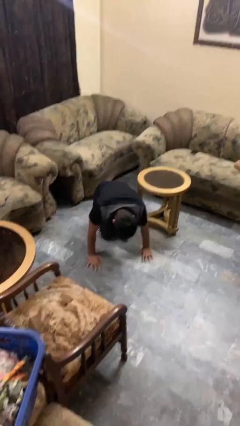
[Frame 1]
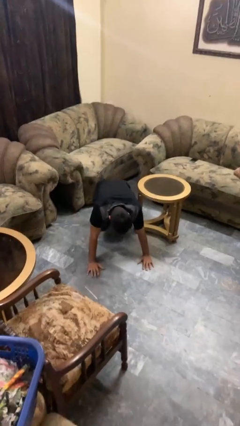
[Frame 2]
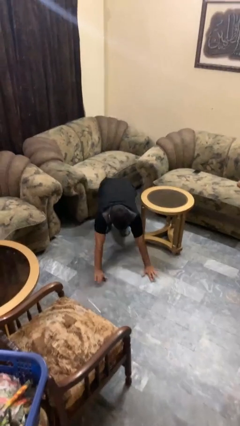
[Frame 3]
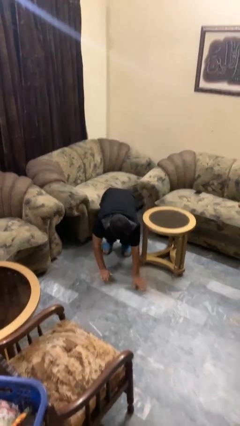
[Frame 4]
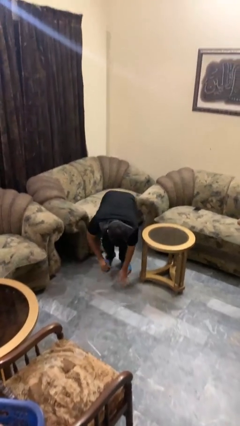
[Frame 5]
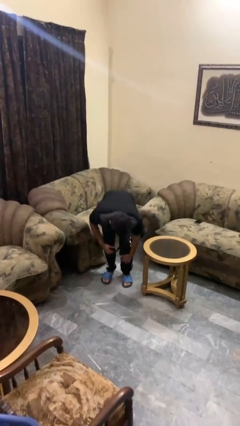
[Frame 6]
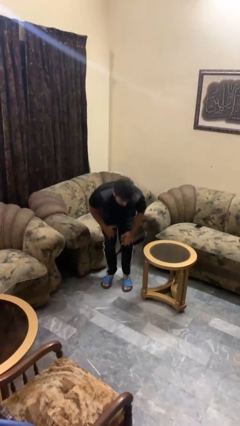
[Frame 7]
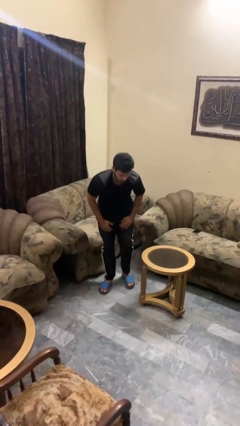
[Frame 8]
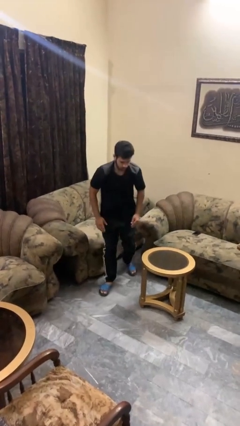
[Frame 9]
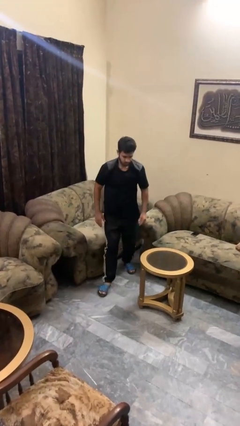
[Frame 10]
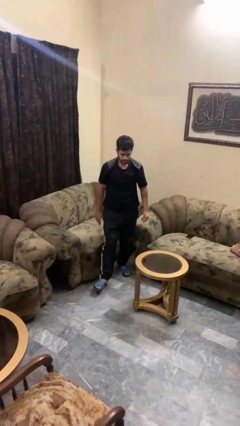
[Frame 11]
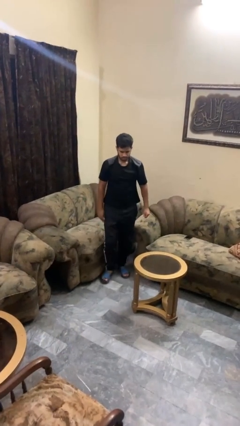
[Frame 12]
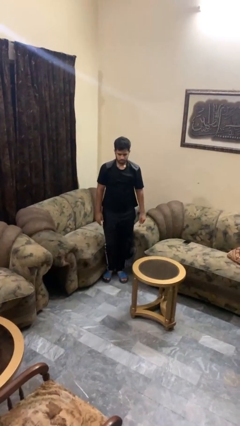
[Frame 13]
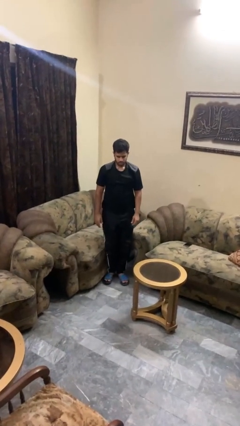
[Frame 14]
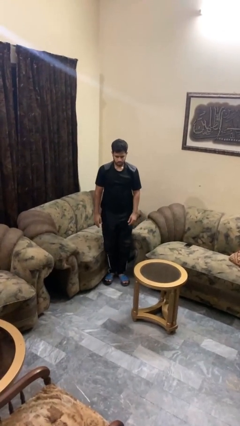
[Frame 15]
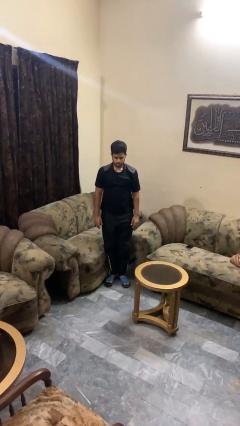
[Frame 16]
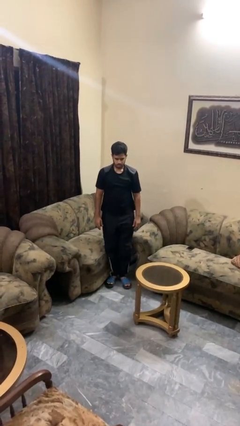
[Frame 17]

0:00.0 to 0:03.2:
person stands up from floor

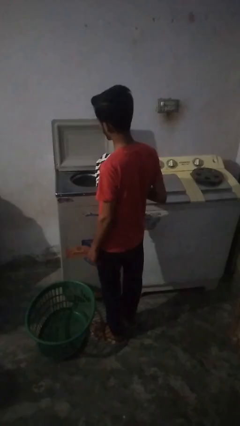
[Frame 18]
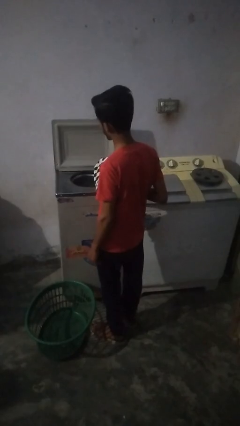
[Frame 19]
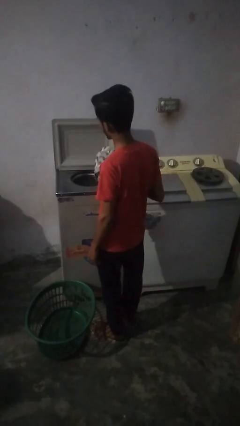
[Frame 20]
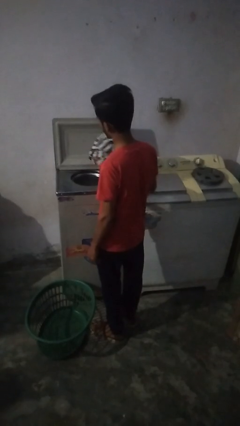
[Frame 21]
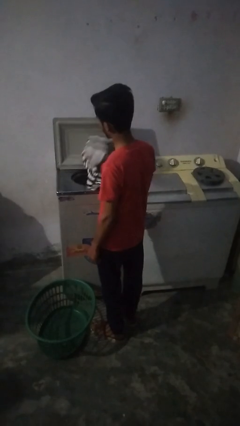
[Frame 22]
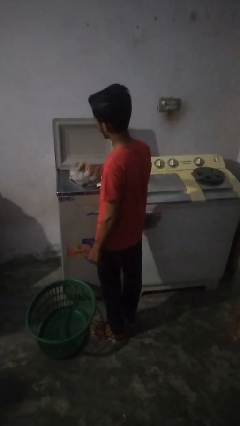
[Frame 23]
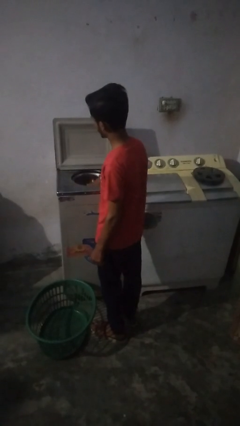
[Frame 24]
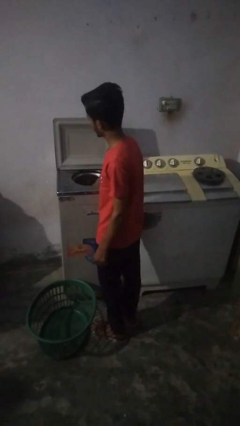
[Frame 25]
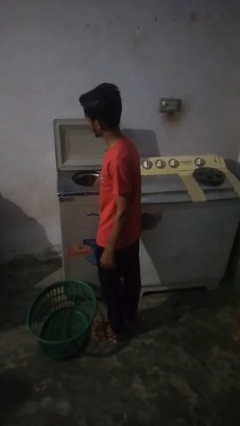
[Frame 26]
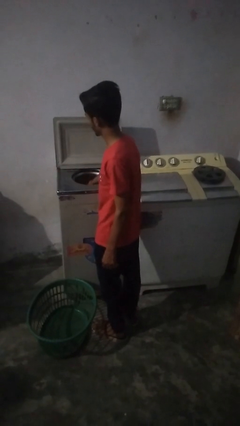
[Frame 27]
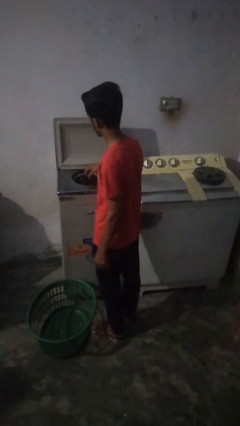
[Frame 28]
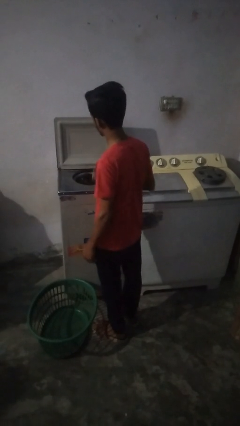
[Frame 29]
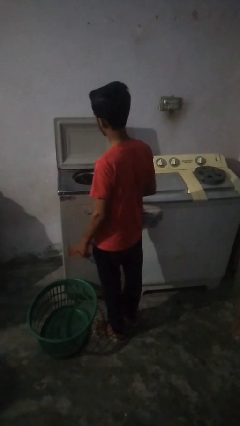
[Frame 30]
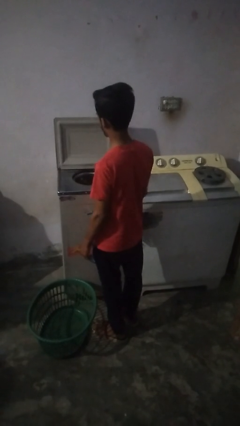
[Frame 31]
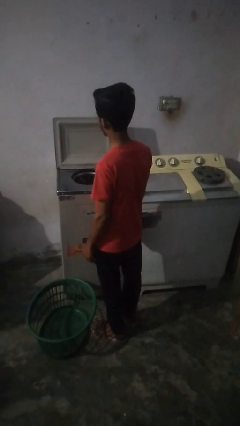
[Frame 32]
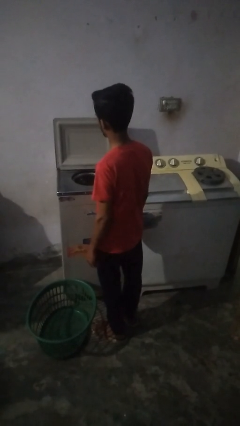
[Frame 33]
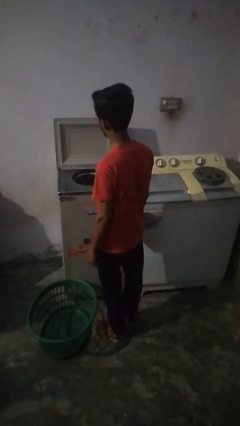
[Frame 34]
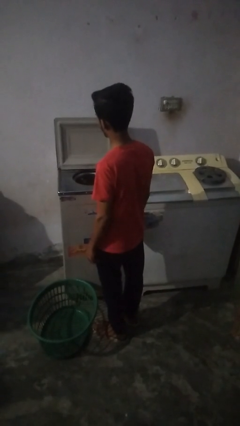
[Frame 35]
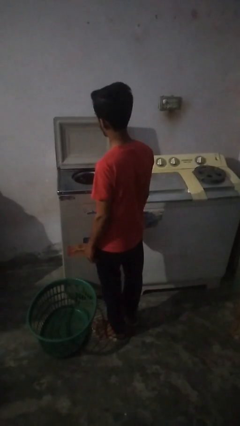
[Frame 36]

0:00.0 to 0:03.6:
person loads dryer

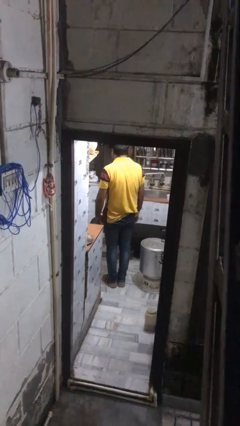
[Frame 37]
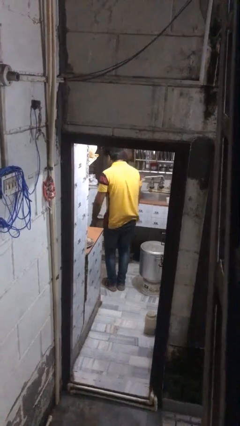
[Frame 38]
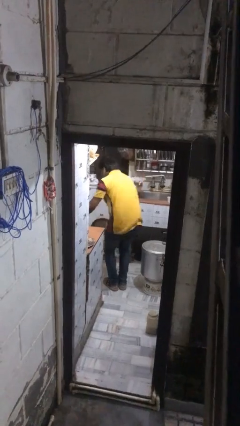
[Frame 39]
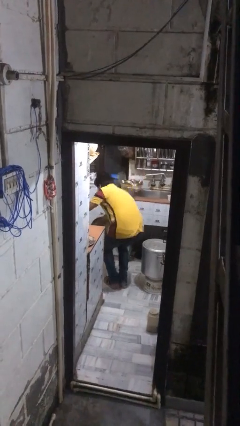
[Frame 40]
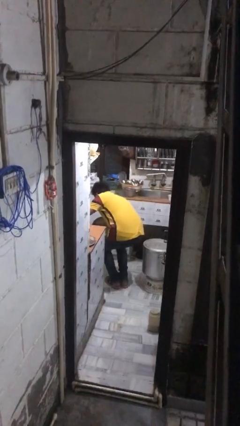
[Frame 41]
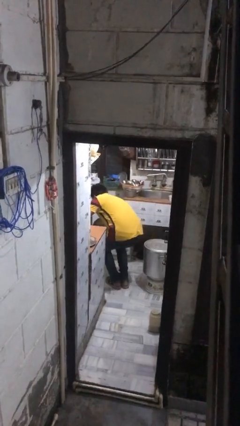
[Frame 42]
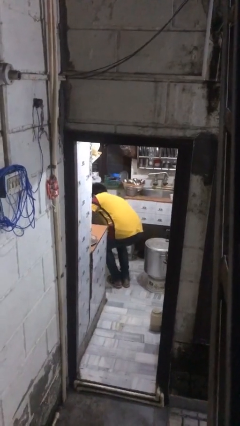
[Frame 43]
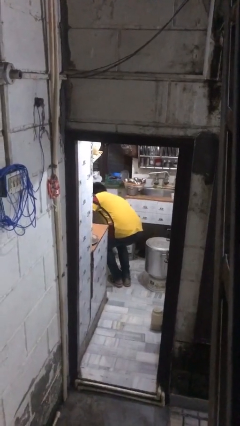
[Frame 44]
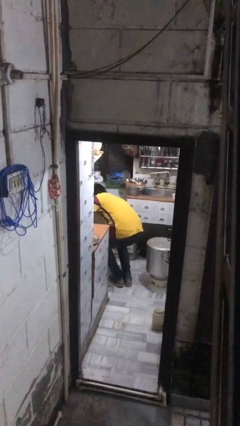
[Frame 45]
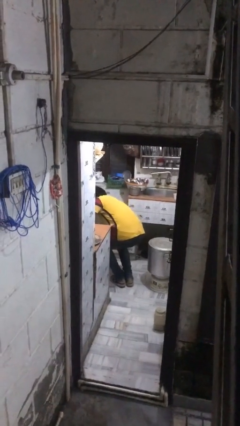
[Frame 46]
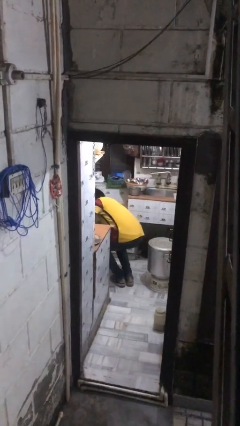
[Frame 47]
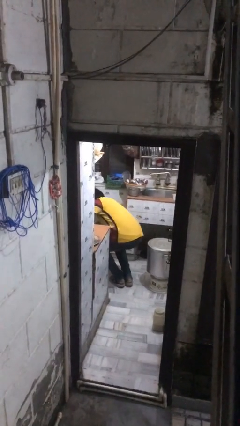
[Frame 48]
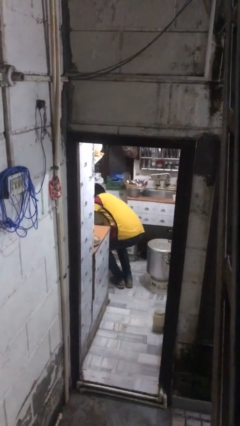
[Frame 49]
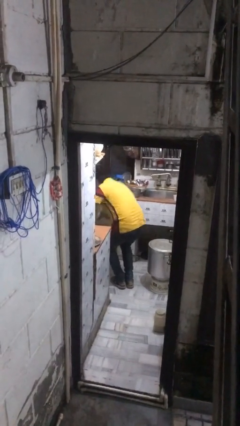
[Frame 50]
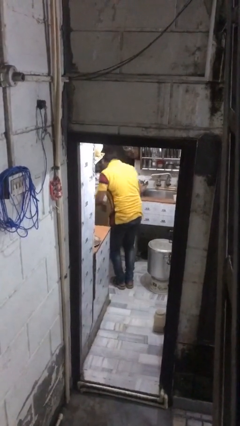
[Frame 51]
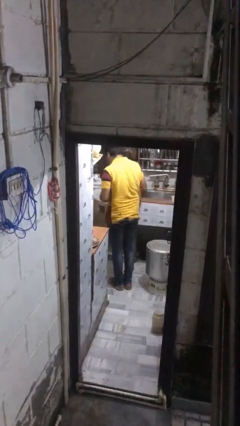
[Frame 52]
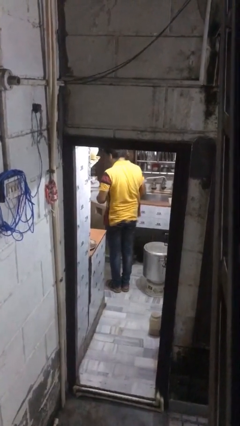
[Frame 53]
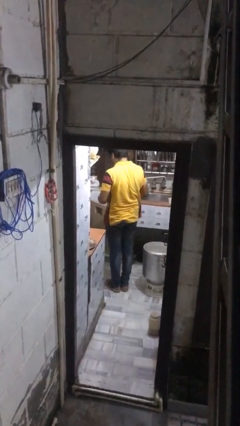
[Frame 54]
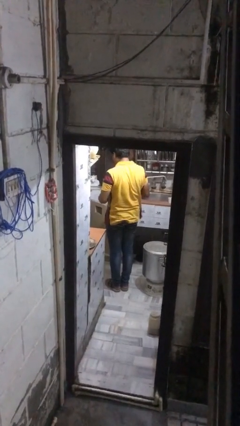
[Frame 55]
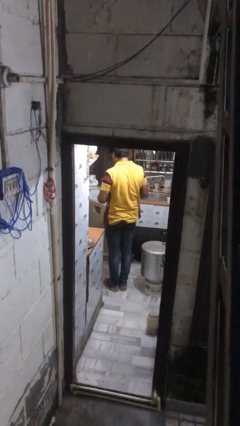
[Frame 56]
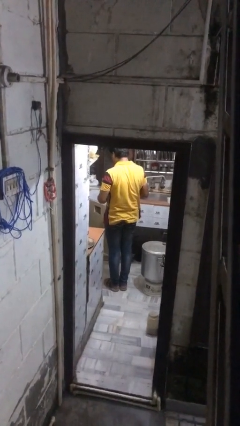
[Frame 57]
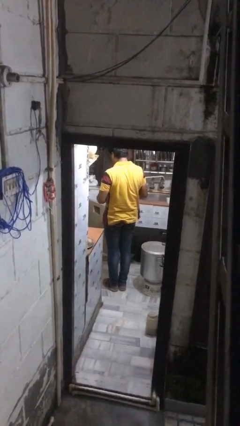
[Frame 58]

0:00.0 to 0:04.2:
person takes object from kitchen drawer

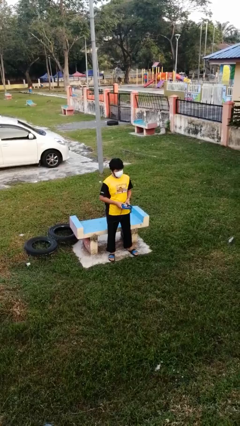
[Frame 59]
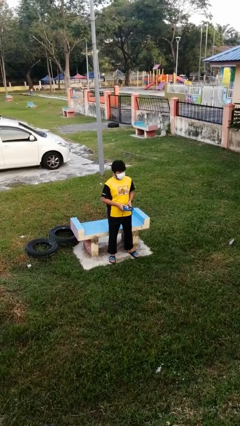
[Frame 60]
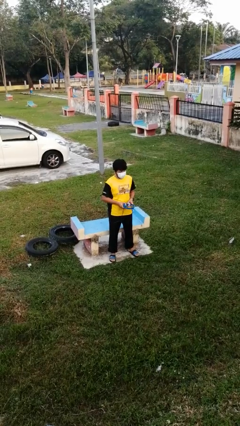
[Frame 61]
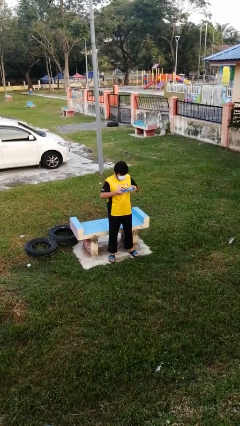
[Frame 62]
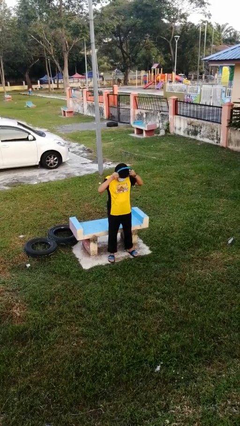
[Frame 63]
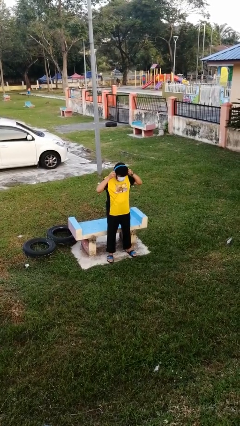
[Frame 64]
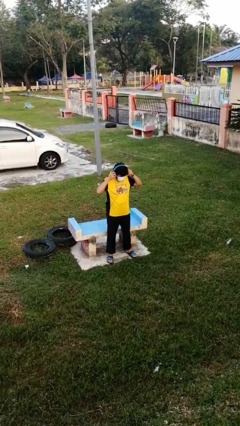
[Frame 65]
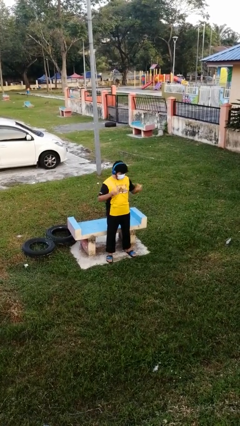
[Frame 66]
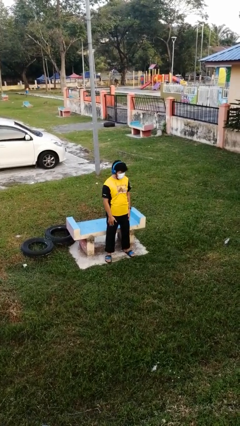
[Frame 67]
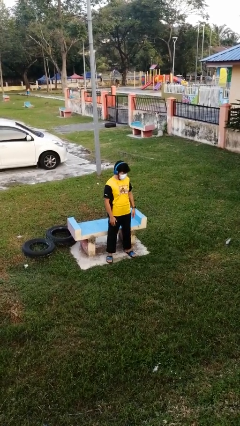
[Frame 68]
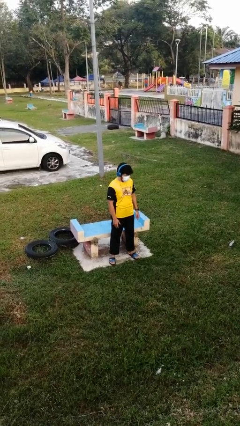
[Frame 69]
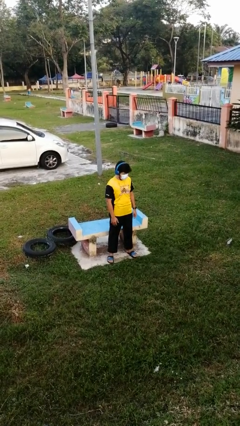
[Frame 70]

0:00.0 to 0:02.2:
person puts on headphones

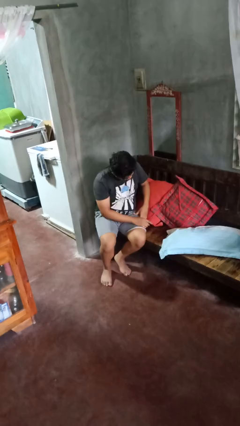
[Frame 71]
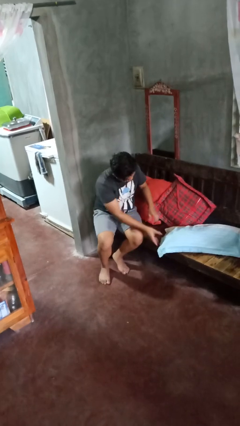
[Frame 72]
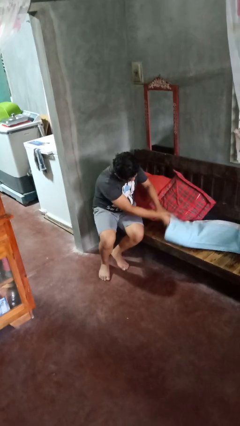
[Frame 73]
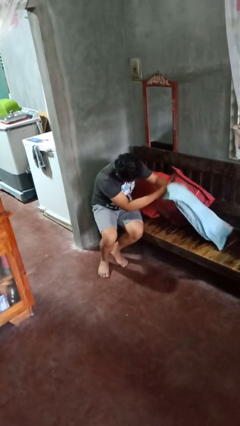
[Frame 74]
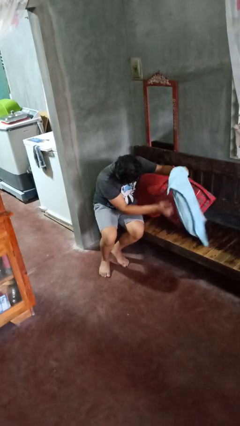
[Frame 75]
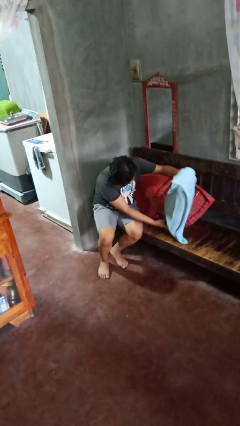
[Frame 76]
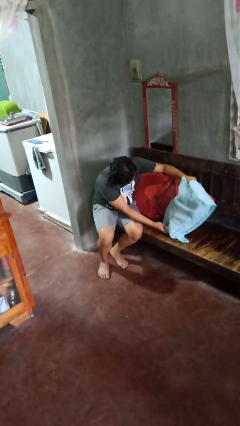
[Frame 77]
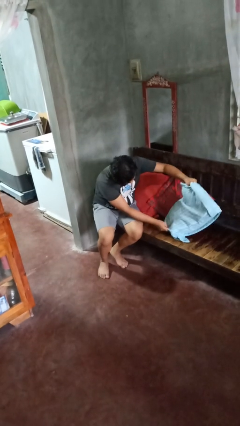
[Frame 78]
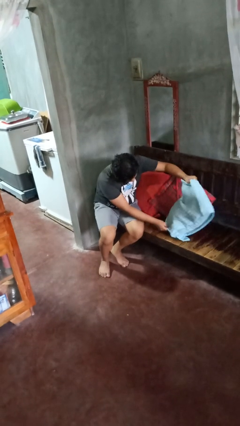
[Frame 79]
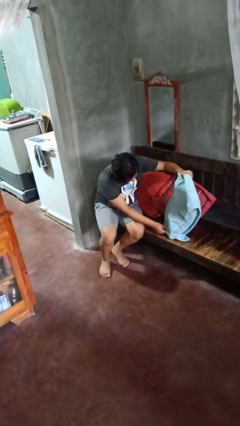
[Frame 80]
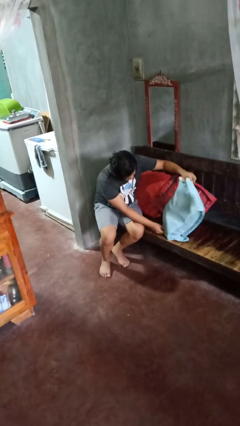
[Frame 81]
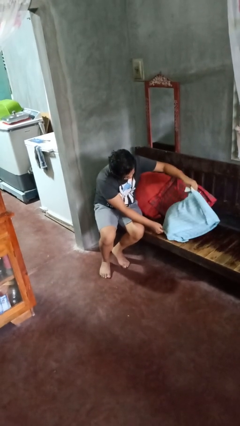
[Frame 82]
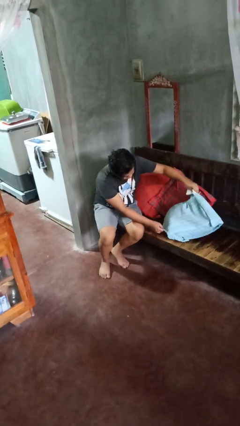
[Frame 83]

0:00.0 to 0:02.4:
person searches in couch

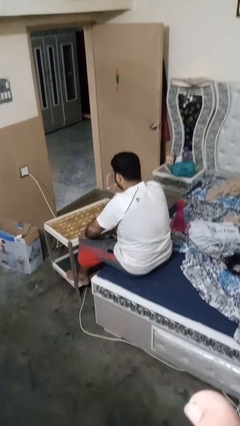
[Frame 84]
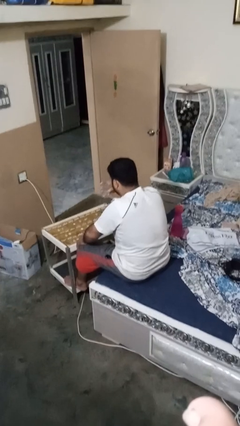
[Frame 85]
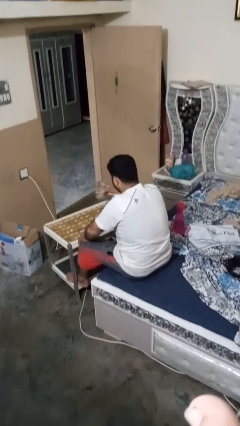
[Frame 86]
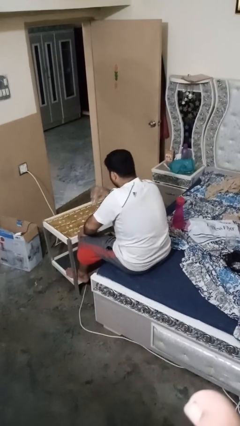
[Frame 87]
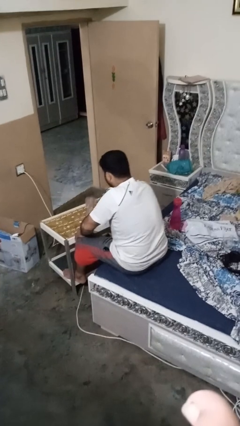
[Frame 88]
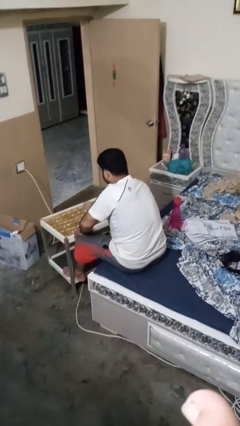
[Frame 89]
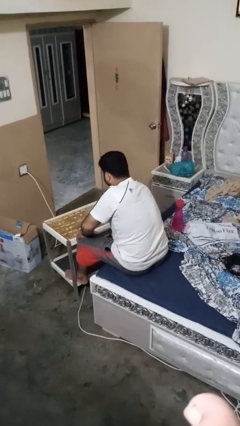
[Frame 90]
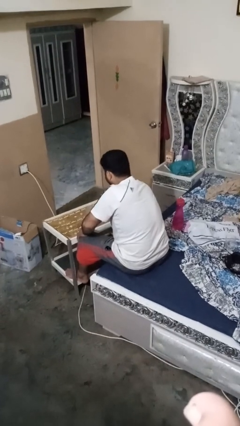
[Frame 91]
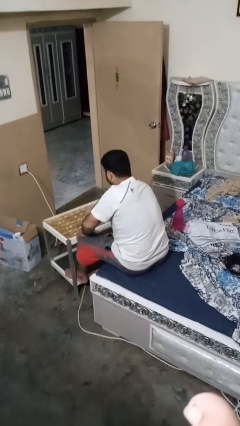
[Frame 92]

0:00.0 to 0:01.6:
person puts down object on table

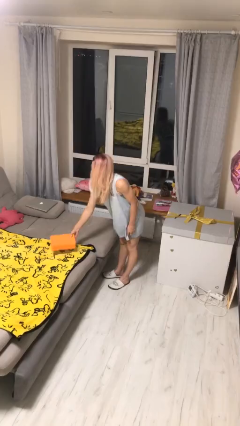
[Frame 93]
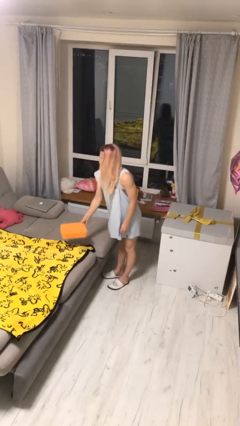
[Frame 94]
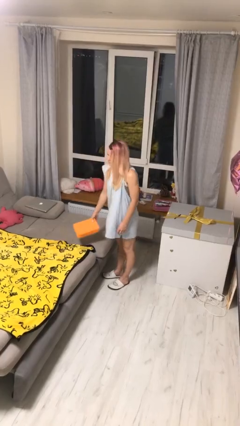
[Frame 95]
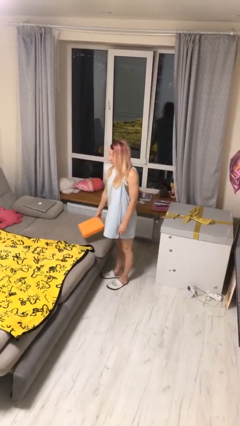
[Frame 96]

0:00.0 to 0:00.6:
person picks up object from bed
